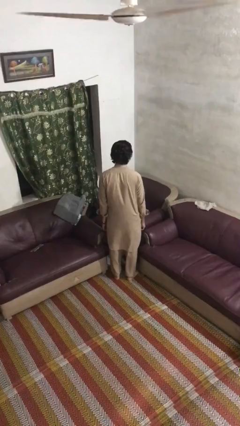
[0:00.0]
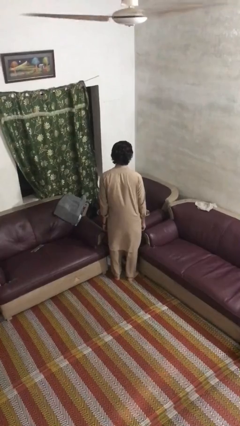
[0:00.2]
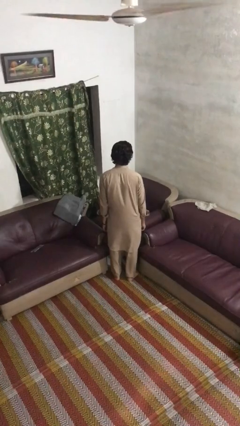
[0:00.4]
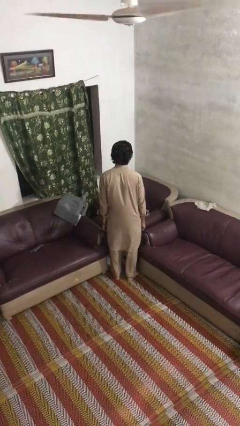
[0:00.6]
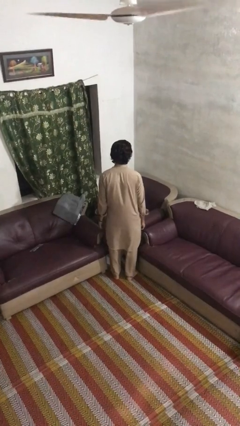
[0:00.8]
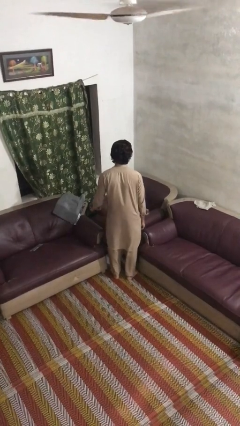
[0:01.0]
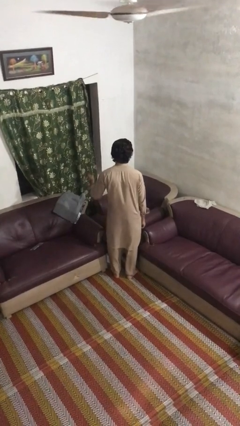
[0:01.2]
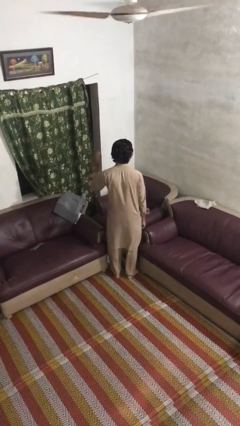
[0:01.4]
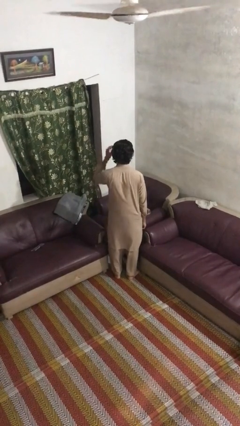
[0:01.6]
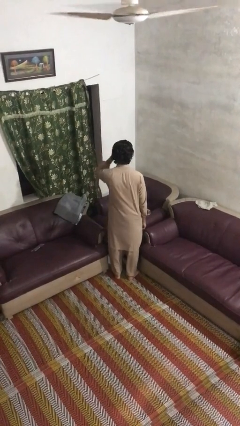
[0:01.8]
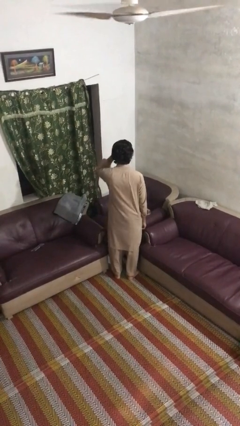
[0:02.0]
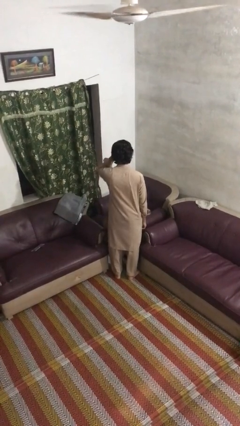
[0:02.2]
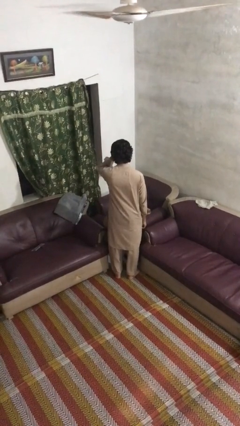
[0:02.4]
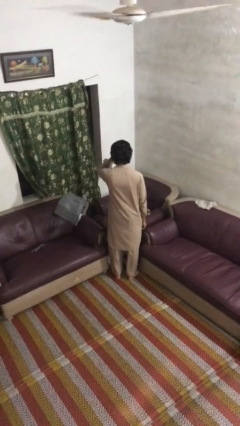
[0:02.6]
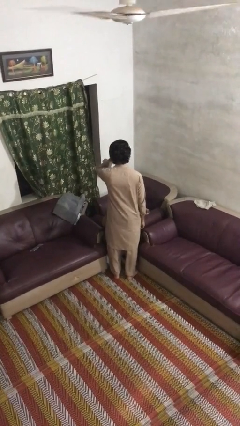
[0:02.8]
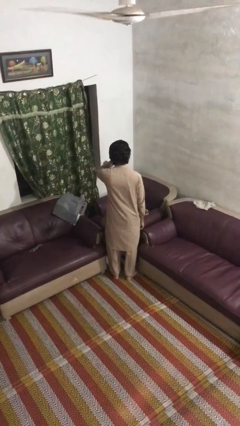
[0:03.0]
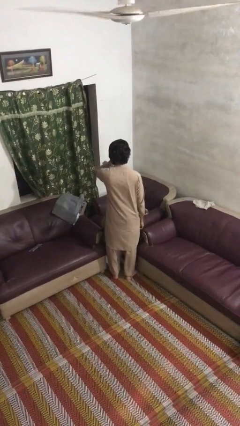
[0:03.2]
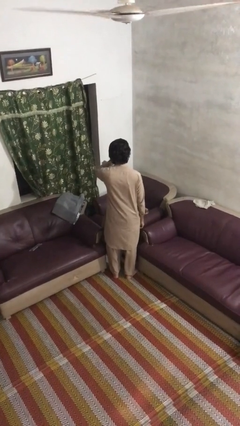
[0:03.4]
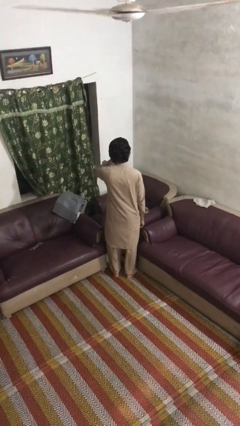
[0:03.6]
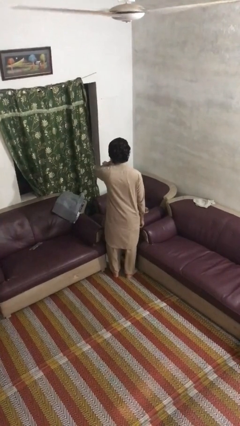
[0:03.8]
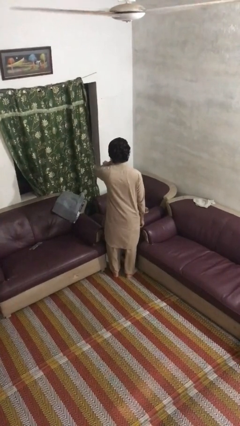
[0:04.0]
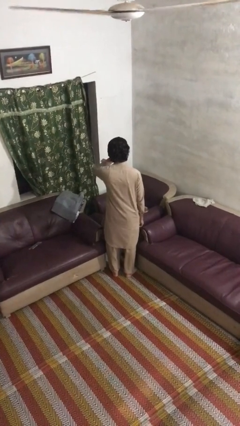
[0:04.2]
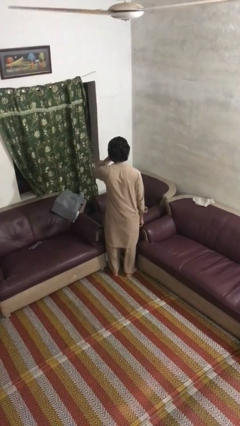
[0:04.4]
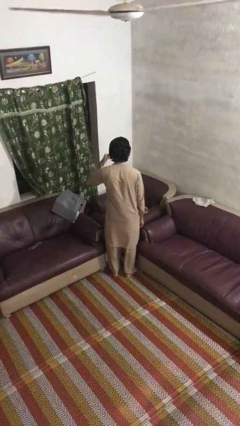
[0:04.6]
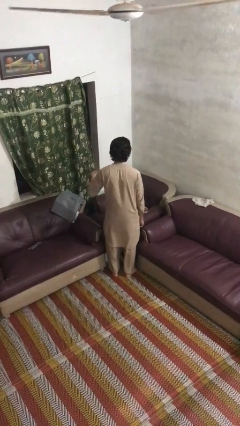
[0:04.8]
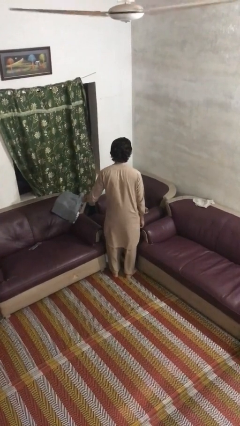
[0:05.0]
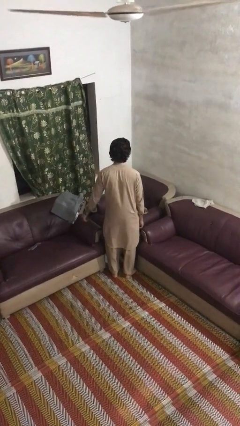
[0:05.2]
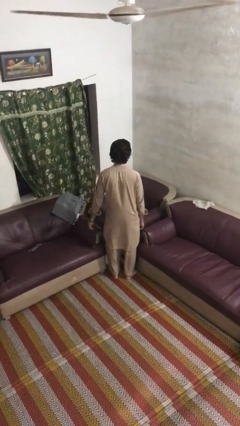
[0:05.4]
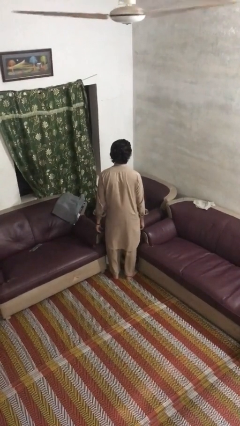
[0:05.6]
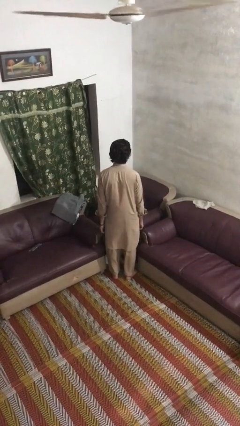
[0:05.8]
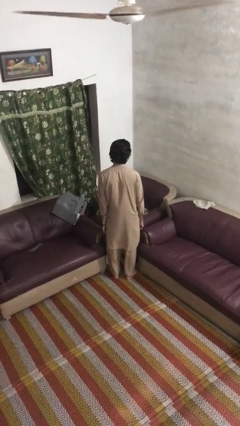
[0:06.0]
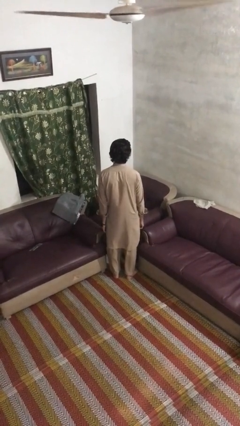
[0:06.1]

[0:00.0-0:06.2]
person scratches face

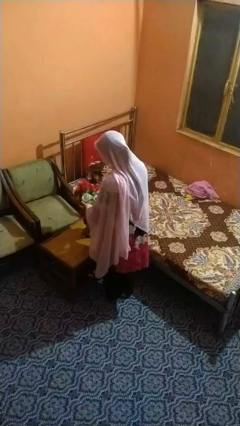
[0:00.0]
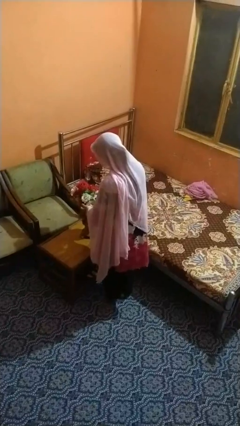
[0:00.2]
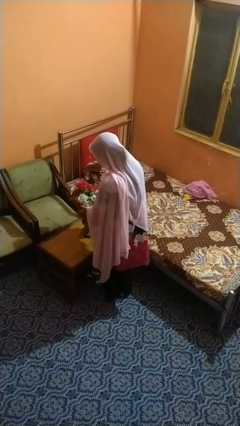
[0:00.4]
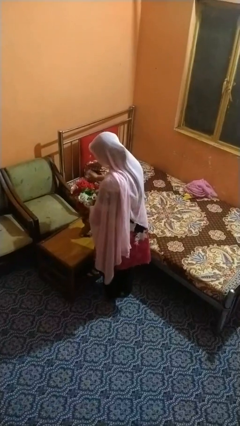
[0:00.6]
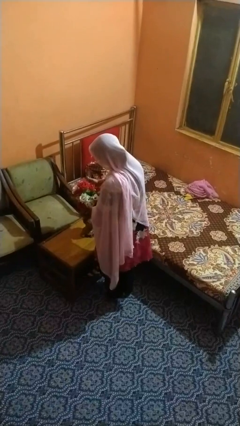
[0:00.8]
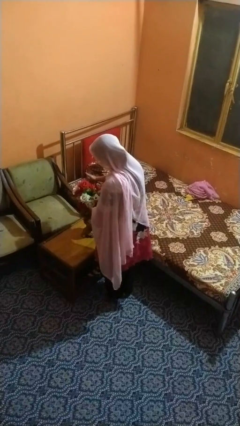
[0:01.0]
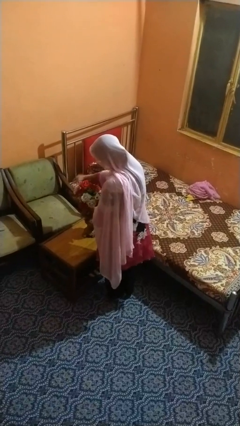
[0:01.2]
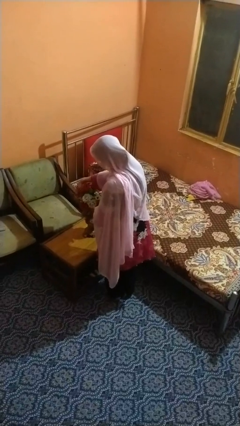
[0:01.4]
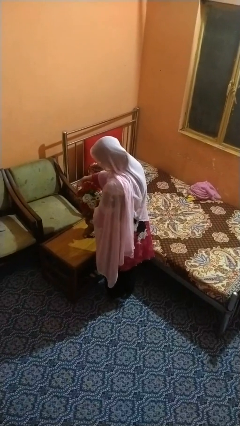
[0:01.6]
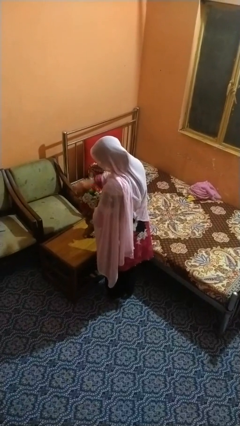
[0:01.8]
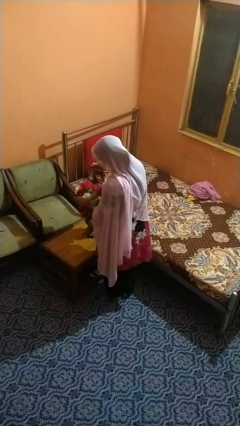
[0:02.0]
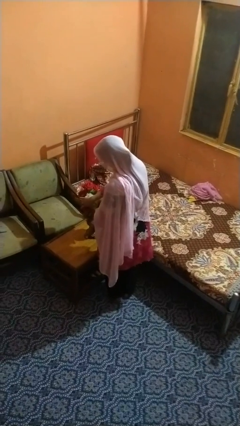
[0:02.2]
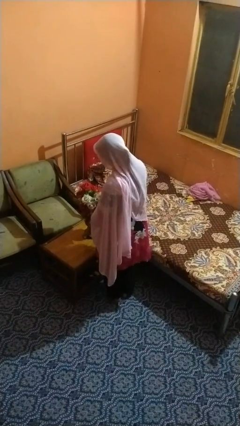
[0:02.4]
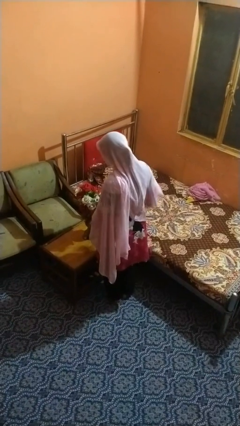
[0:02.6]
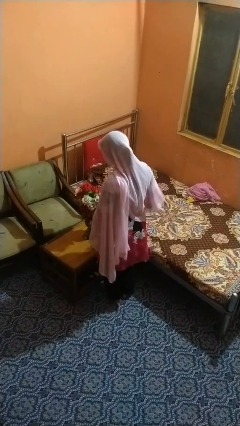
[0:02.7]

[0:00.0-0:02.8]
person arranges flowers in vase

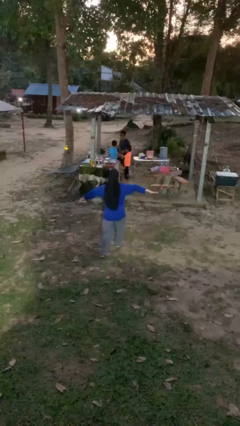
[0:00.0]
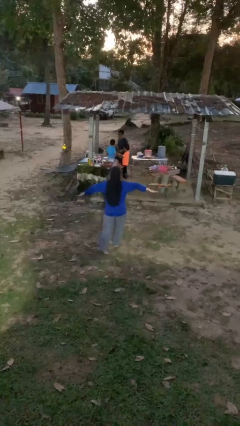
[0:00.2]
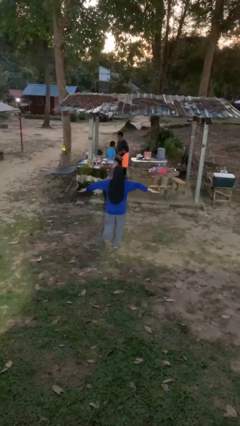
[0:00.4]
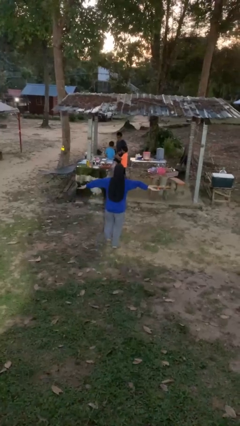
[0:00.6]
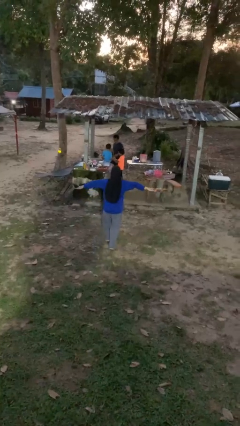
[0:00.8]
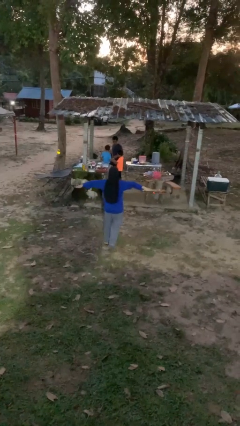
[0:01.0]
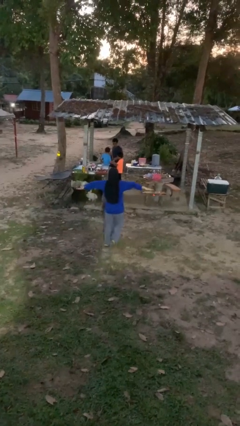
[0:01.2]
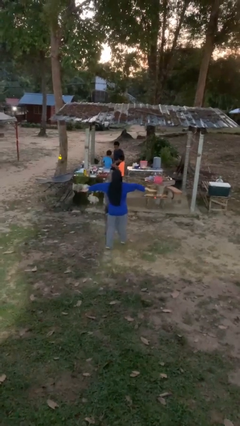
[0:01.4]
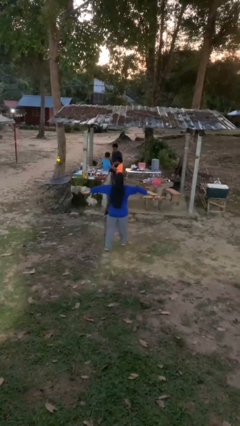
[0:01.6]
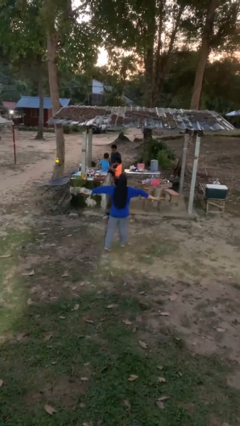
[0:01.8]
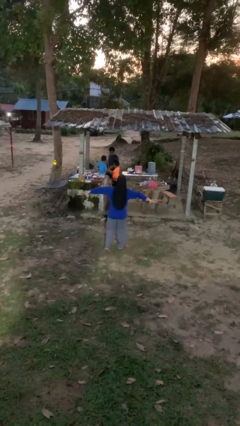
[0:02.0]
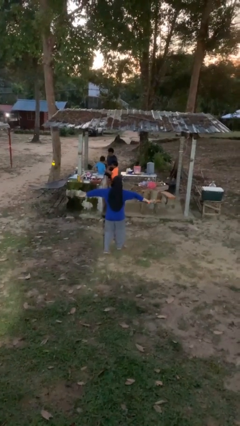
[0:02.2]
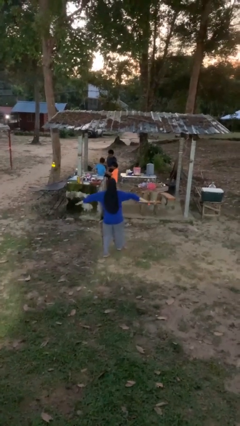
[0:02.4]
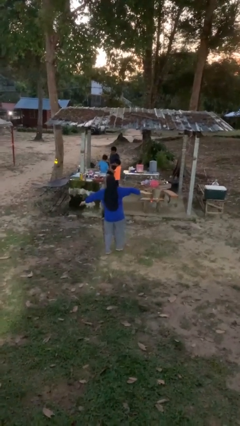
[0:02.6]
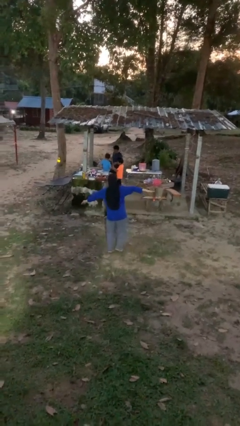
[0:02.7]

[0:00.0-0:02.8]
person walks tiptoe

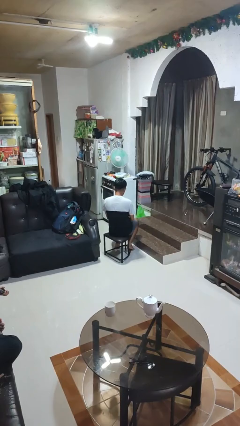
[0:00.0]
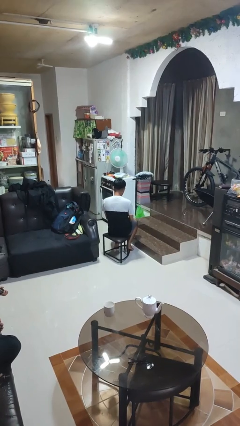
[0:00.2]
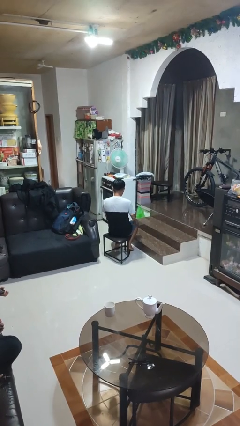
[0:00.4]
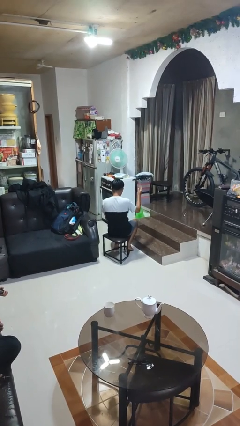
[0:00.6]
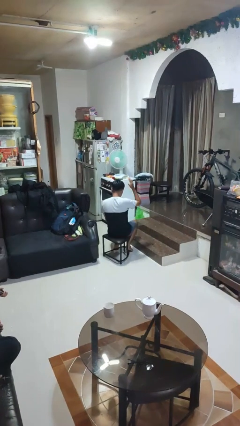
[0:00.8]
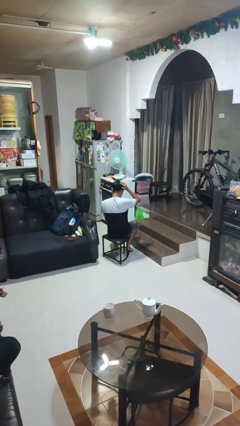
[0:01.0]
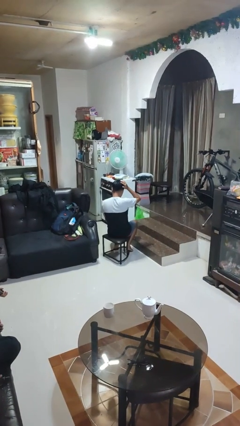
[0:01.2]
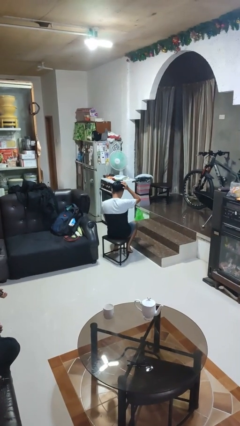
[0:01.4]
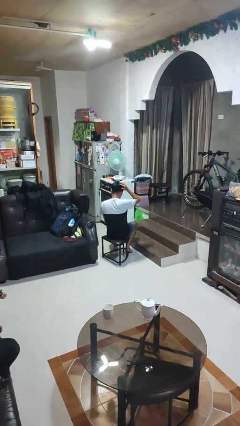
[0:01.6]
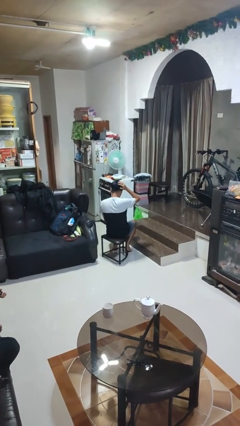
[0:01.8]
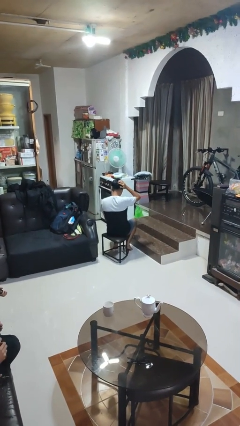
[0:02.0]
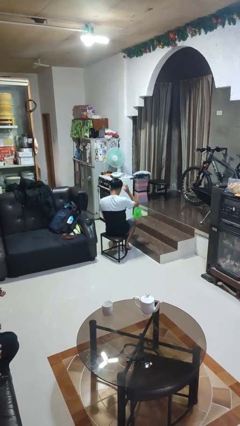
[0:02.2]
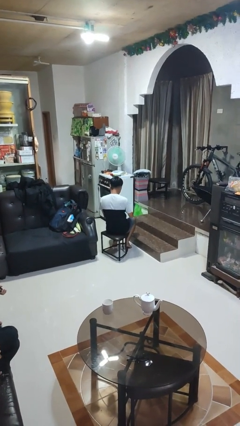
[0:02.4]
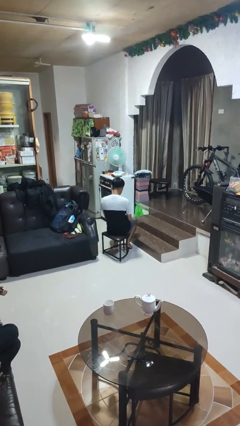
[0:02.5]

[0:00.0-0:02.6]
person pats head

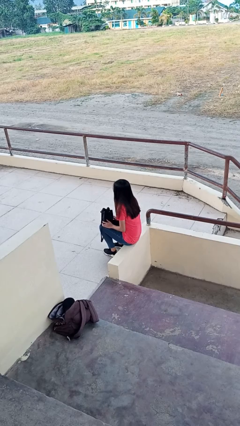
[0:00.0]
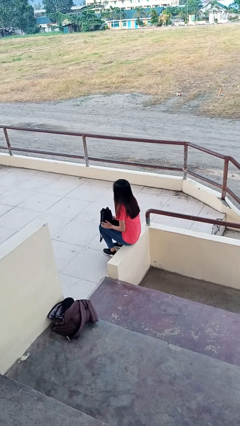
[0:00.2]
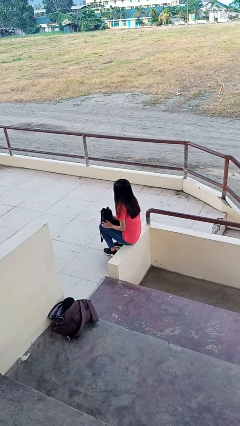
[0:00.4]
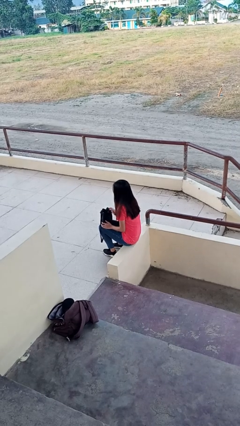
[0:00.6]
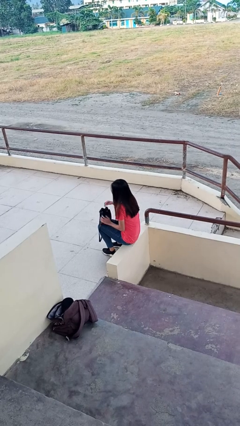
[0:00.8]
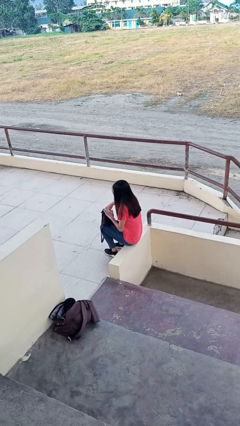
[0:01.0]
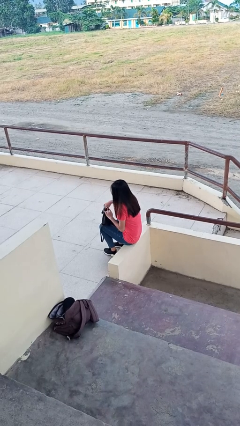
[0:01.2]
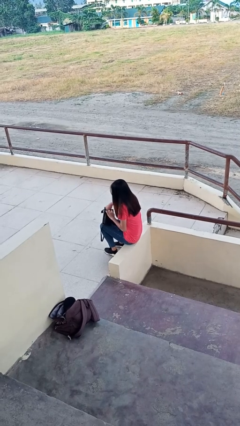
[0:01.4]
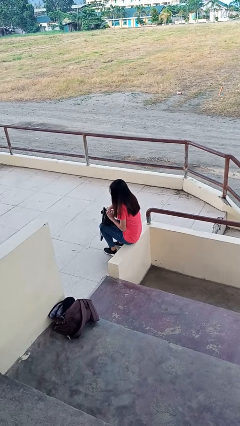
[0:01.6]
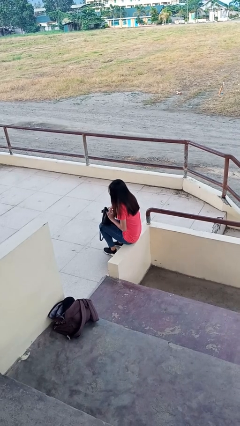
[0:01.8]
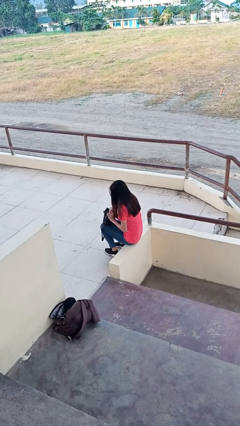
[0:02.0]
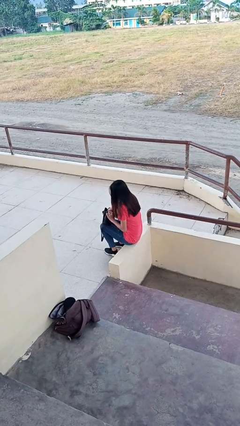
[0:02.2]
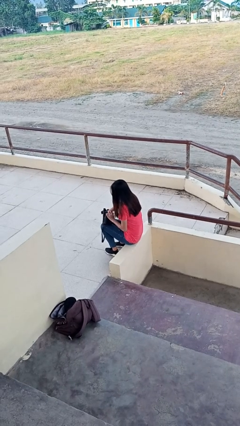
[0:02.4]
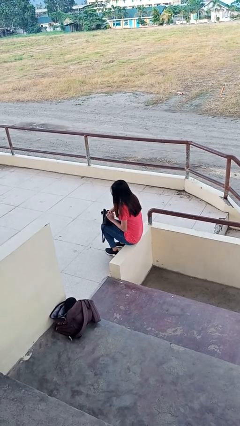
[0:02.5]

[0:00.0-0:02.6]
person searches in purse

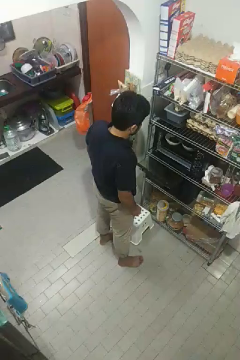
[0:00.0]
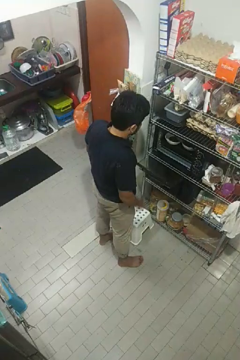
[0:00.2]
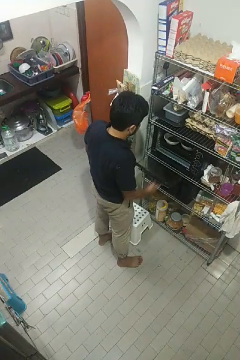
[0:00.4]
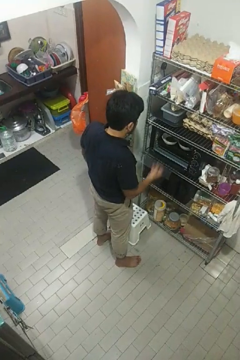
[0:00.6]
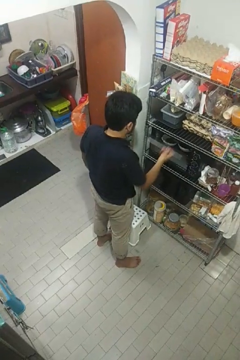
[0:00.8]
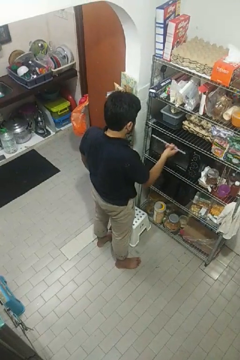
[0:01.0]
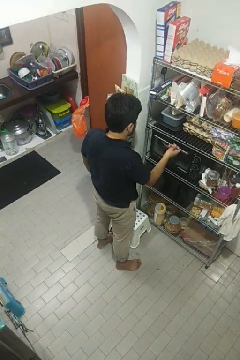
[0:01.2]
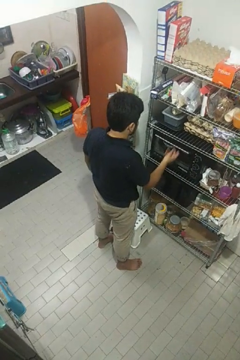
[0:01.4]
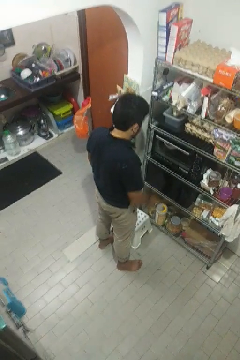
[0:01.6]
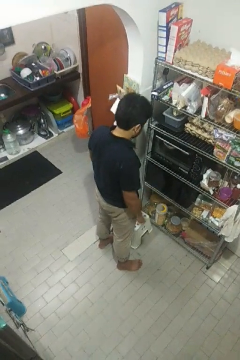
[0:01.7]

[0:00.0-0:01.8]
person closes oven door